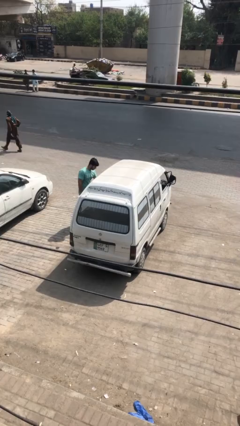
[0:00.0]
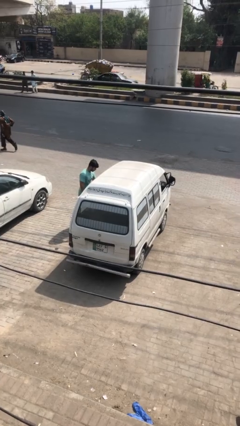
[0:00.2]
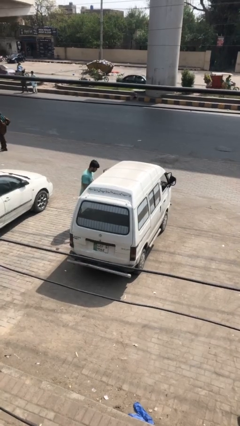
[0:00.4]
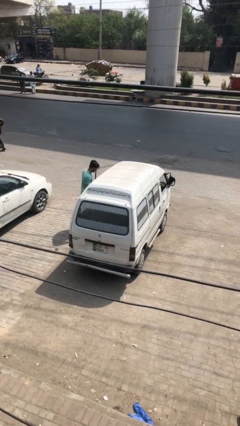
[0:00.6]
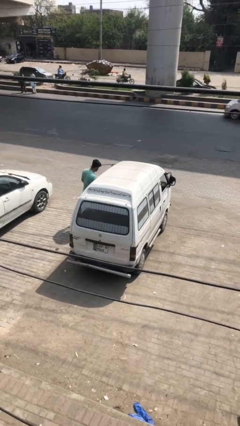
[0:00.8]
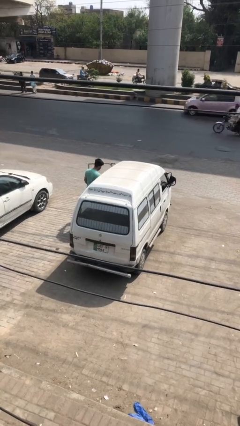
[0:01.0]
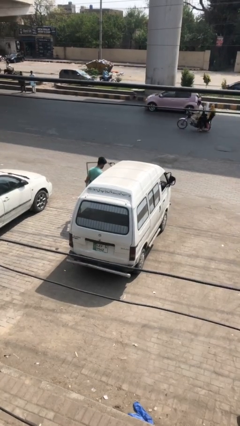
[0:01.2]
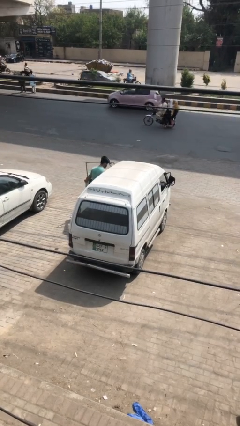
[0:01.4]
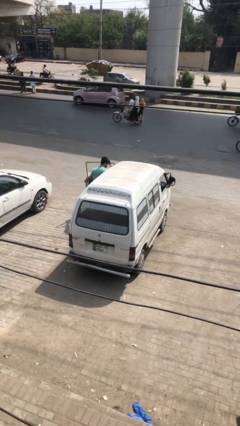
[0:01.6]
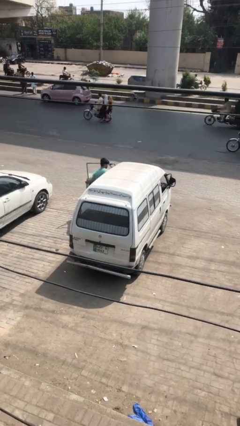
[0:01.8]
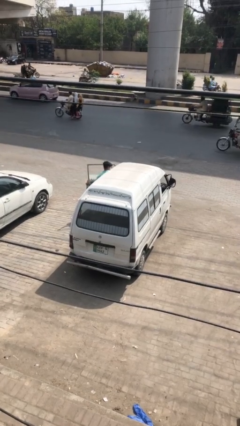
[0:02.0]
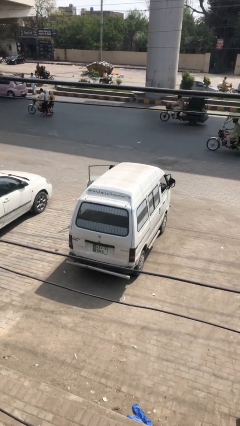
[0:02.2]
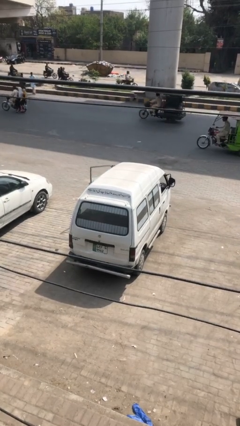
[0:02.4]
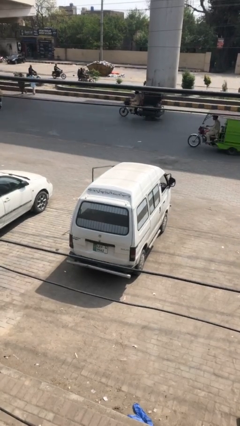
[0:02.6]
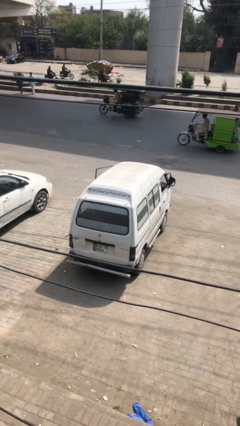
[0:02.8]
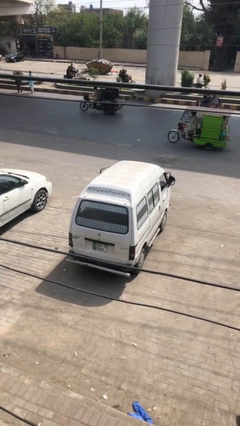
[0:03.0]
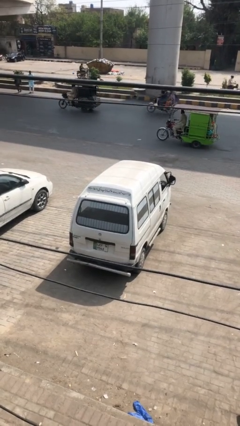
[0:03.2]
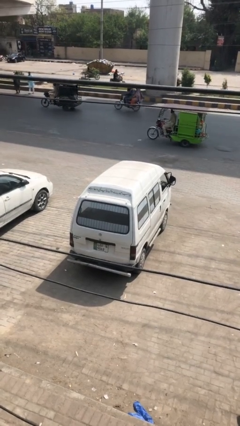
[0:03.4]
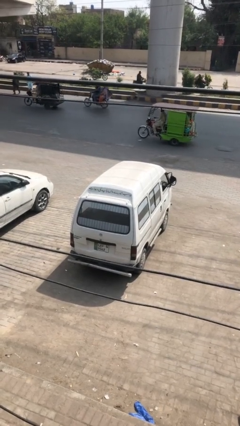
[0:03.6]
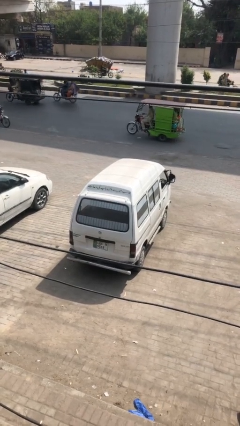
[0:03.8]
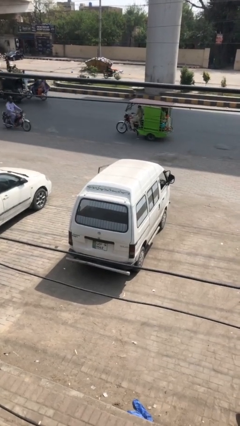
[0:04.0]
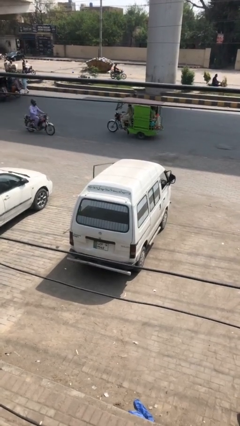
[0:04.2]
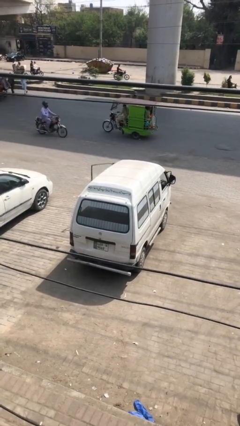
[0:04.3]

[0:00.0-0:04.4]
car picks up person

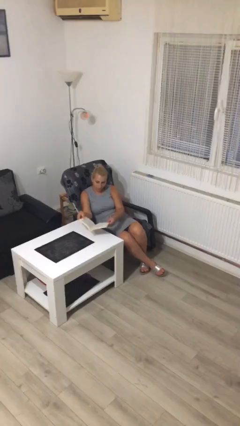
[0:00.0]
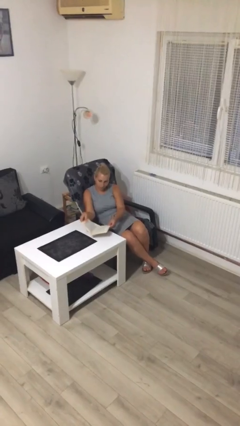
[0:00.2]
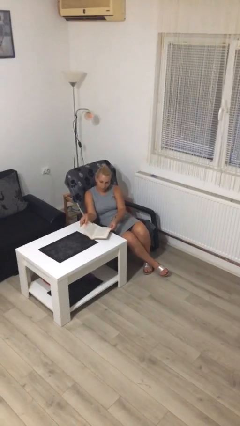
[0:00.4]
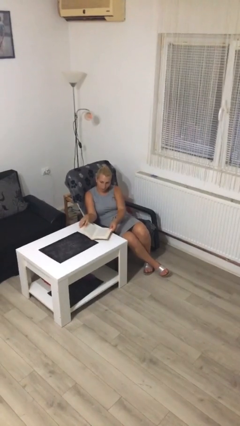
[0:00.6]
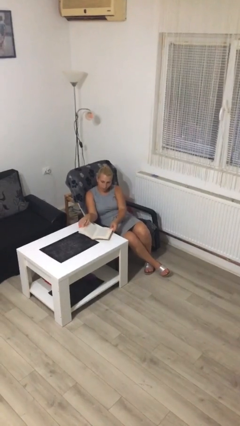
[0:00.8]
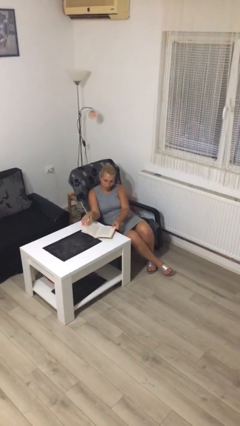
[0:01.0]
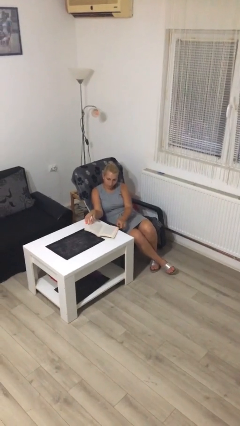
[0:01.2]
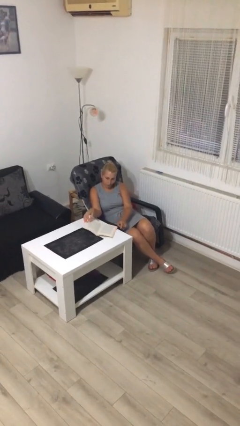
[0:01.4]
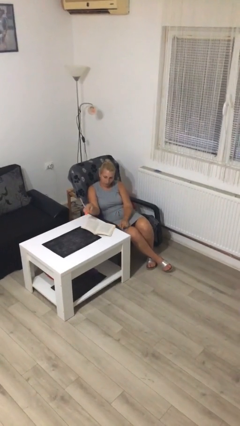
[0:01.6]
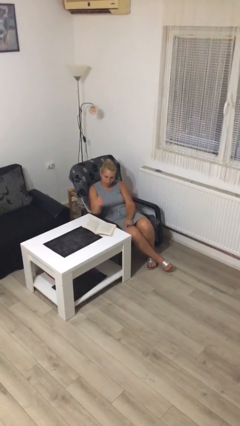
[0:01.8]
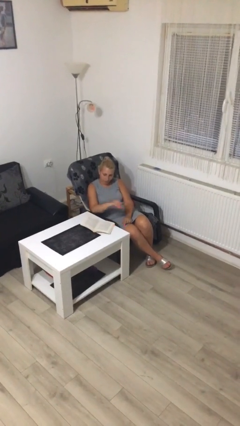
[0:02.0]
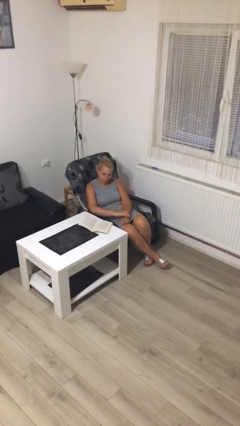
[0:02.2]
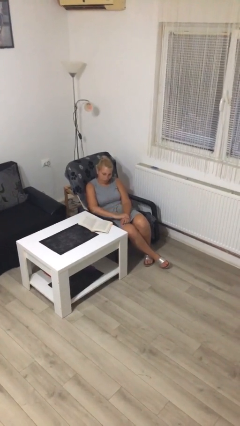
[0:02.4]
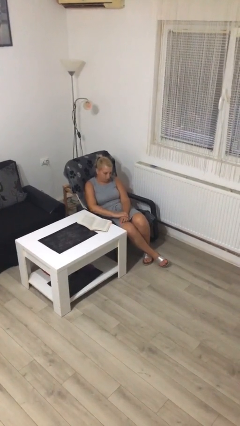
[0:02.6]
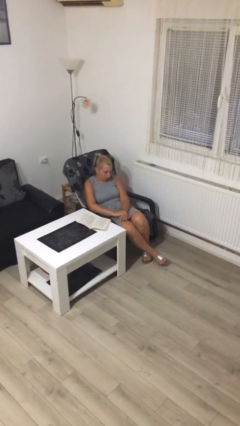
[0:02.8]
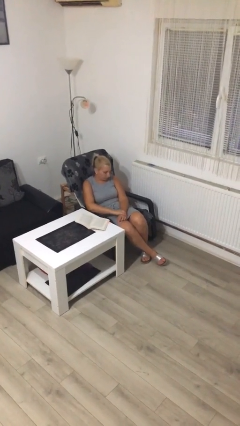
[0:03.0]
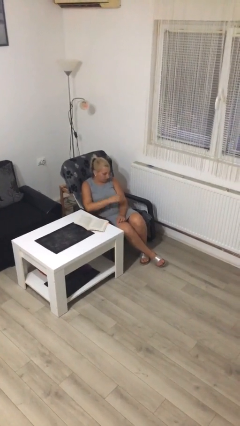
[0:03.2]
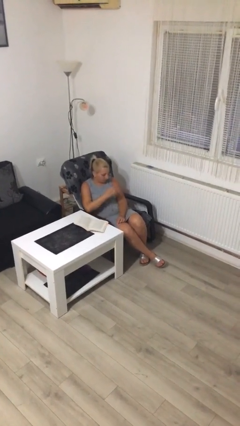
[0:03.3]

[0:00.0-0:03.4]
person puts down object on table

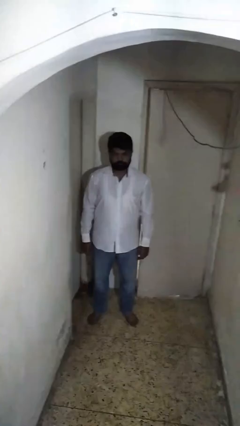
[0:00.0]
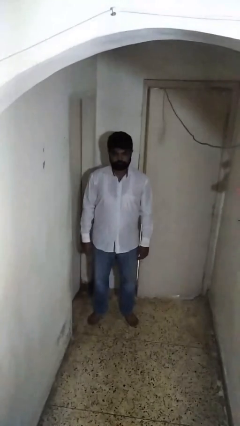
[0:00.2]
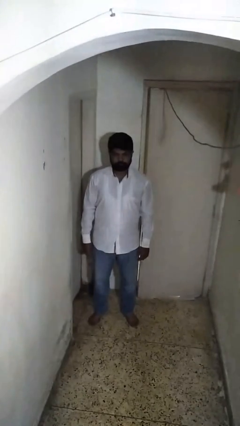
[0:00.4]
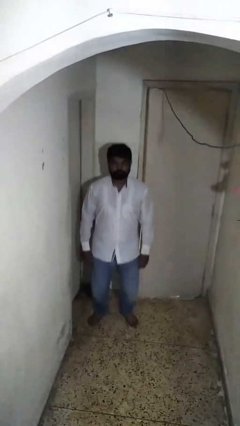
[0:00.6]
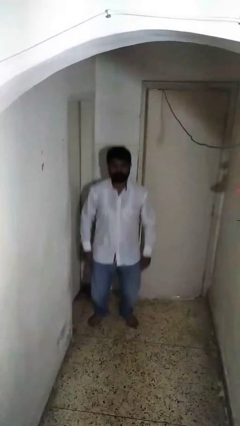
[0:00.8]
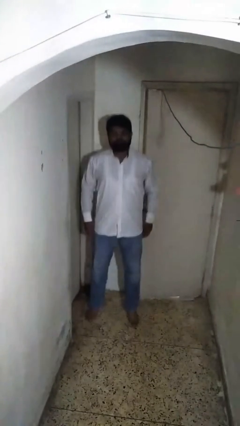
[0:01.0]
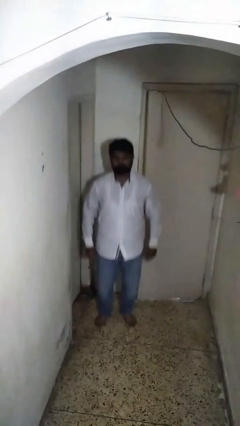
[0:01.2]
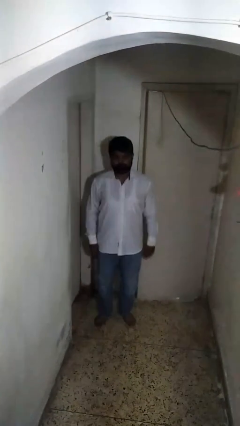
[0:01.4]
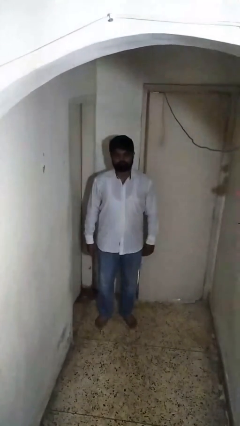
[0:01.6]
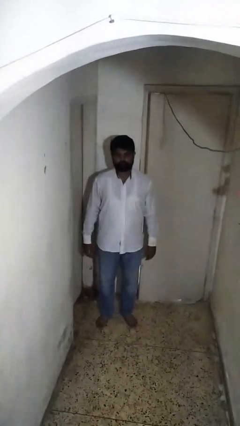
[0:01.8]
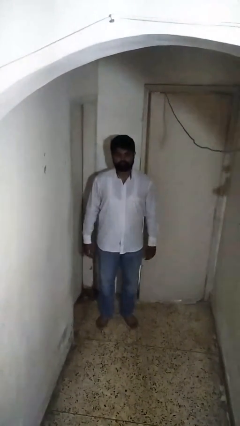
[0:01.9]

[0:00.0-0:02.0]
person jumps

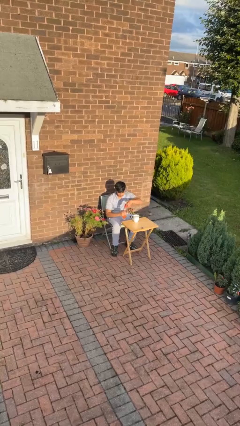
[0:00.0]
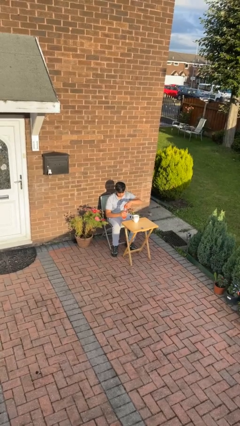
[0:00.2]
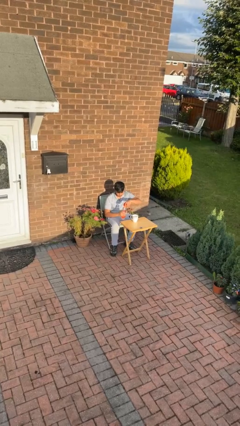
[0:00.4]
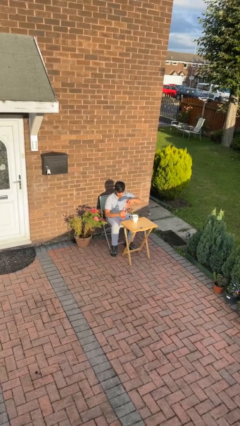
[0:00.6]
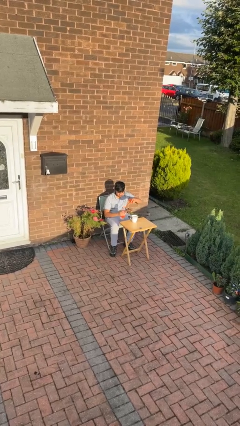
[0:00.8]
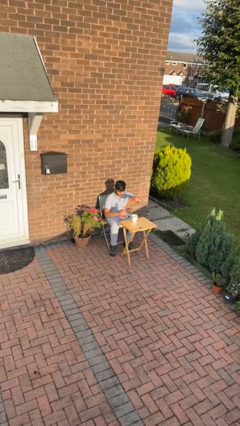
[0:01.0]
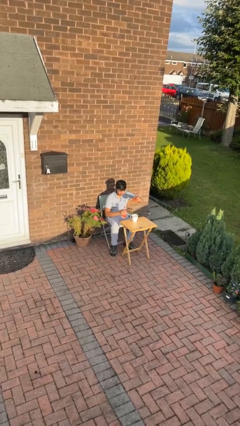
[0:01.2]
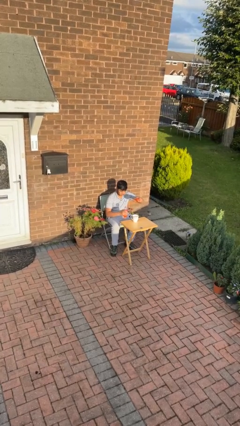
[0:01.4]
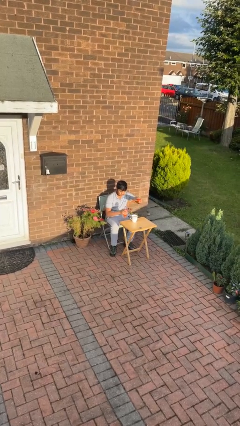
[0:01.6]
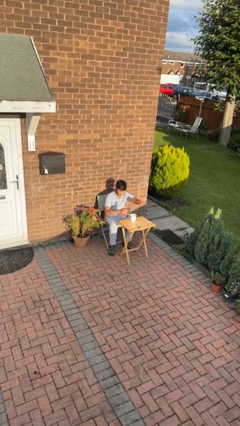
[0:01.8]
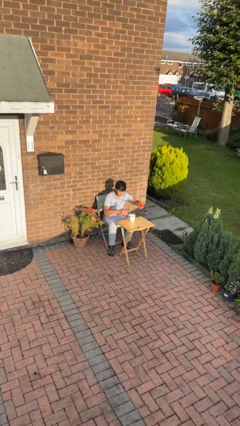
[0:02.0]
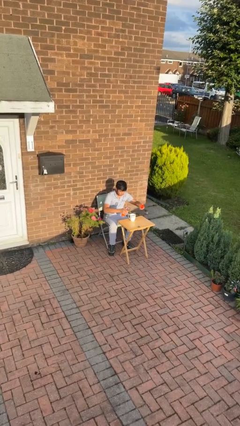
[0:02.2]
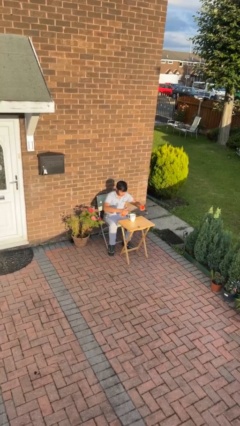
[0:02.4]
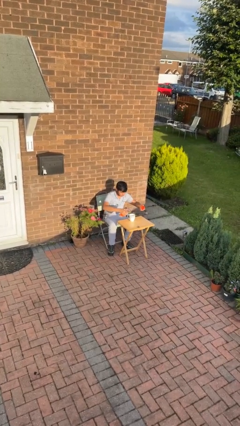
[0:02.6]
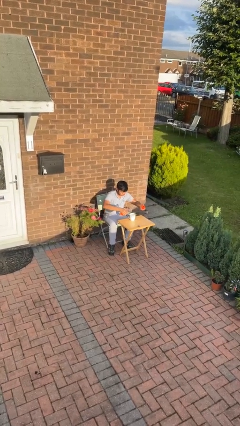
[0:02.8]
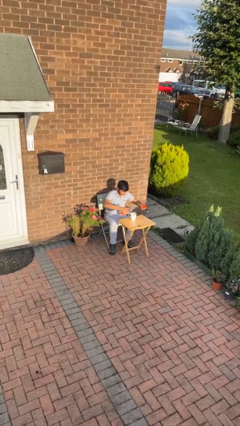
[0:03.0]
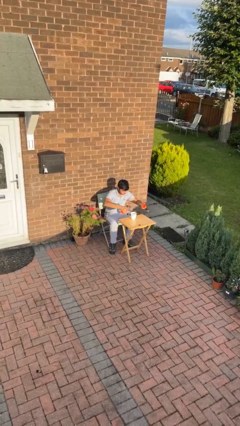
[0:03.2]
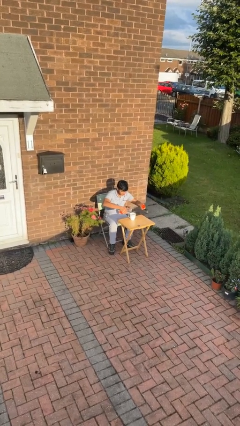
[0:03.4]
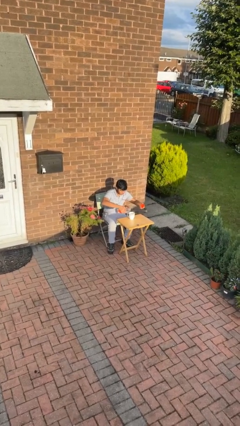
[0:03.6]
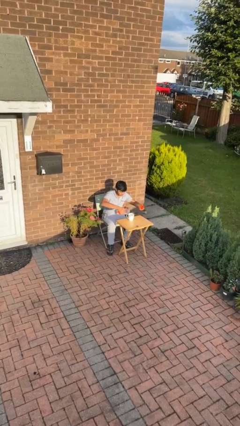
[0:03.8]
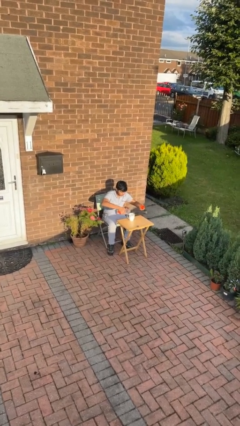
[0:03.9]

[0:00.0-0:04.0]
person pours liquid into cup

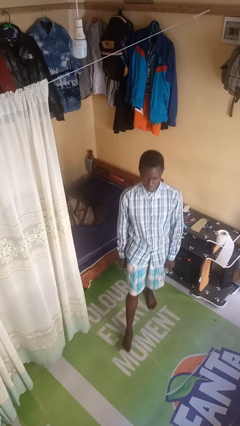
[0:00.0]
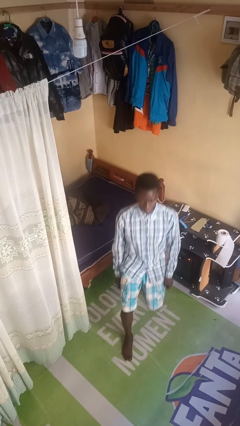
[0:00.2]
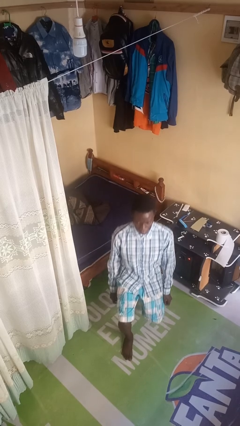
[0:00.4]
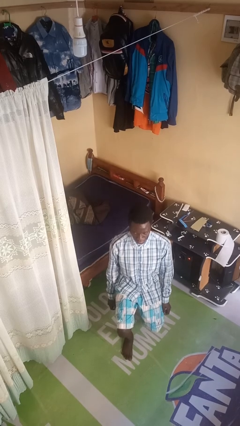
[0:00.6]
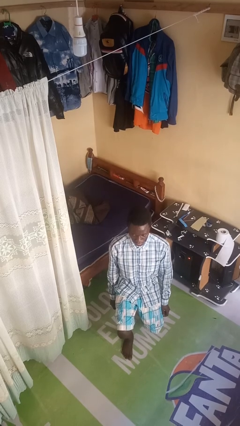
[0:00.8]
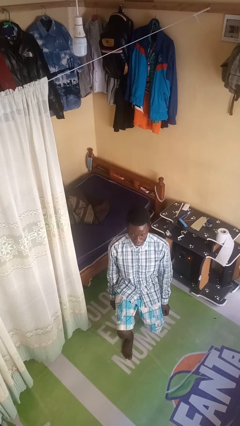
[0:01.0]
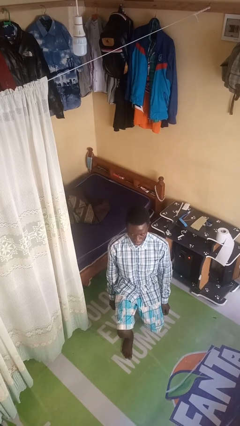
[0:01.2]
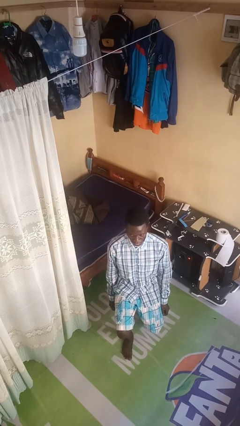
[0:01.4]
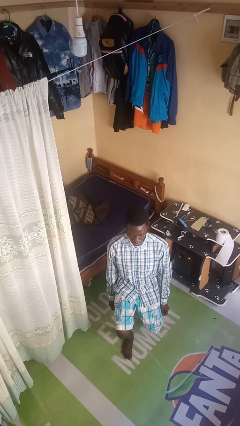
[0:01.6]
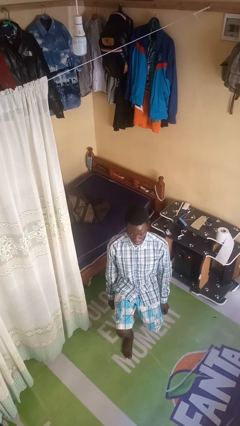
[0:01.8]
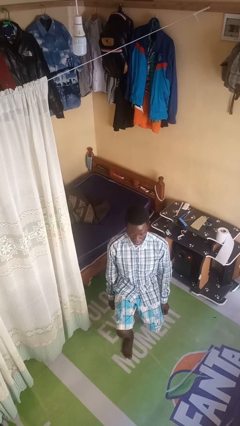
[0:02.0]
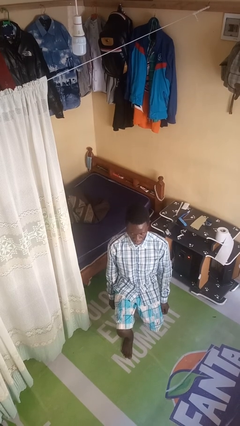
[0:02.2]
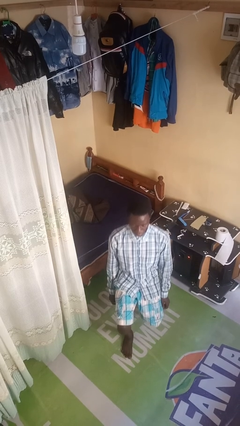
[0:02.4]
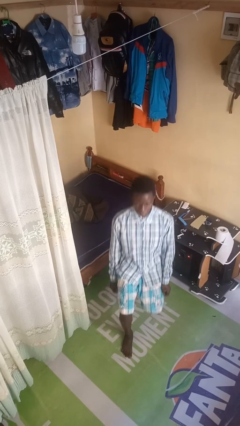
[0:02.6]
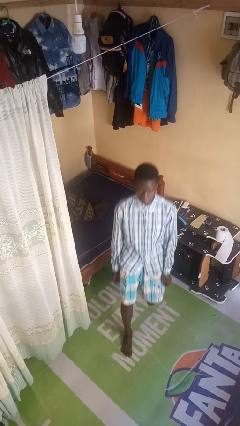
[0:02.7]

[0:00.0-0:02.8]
person exercises with lunges

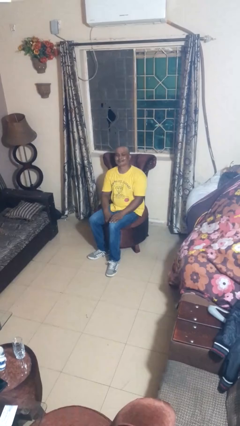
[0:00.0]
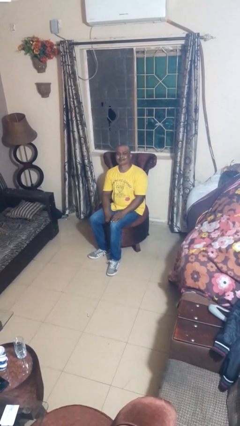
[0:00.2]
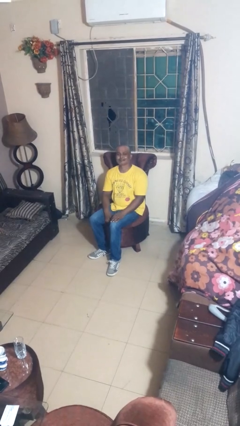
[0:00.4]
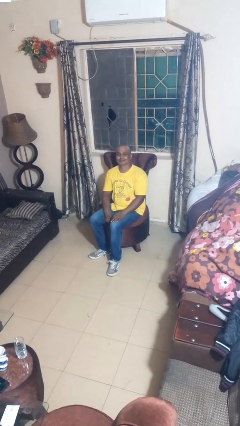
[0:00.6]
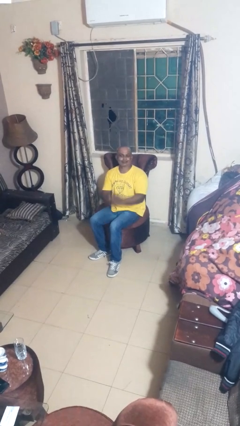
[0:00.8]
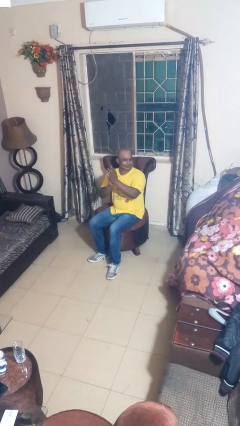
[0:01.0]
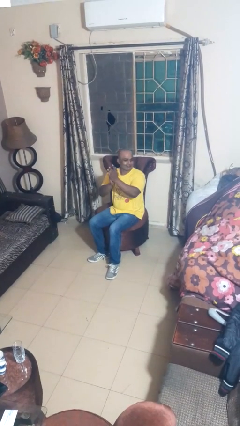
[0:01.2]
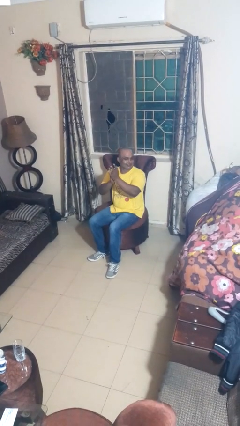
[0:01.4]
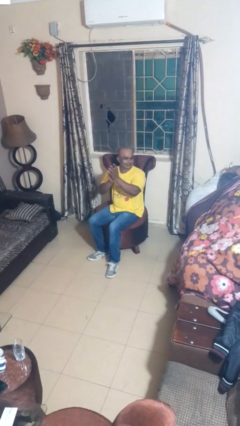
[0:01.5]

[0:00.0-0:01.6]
person claps hands
